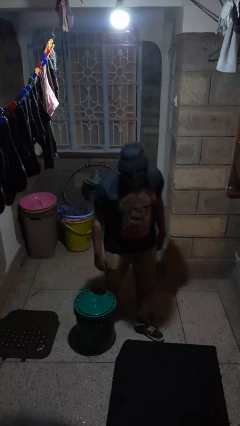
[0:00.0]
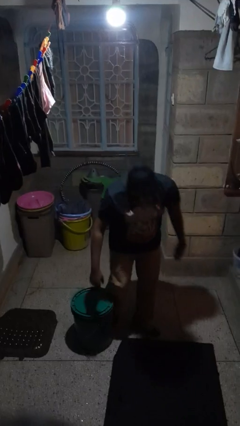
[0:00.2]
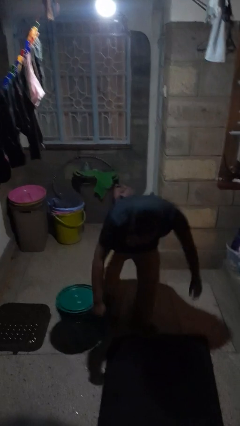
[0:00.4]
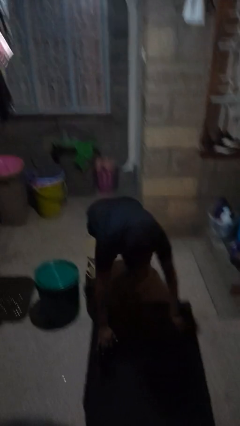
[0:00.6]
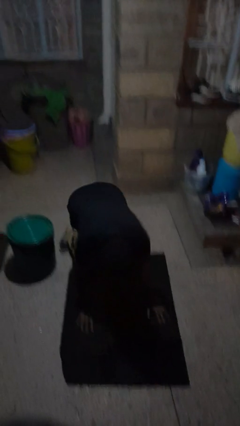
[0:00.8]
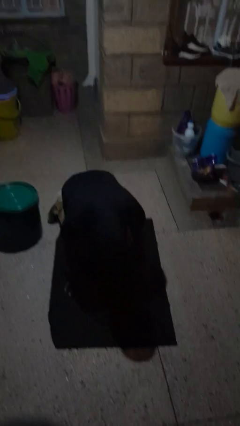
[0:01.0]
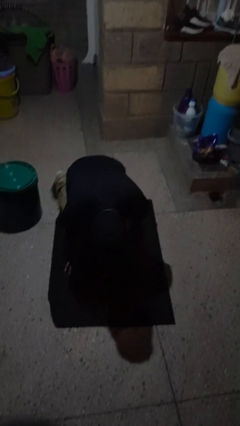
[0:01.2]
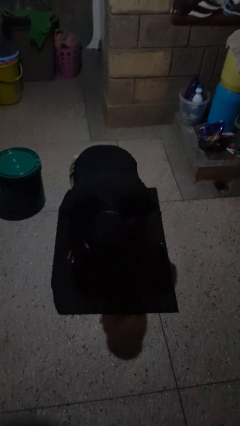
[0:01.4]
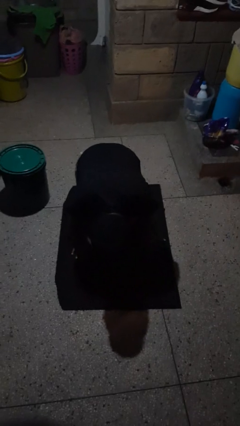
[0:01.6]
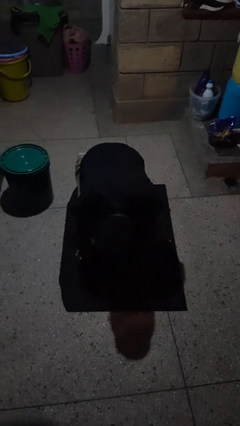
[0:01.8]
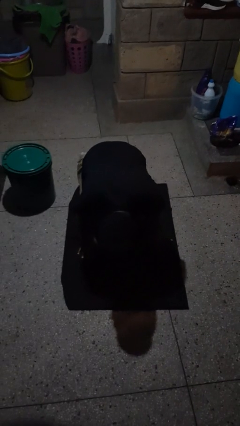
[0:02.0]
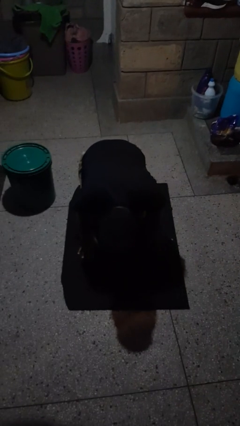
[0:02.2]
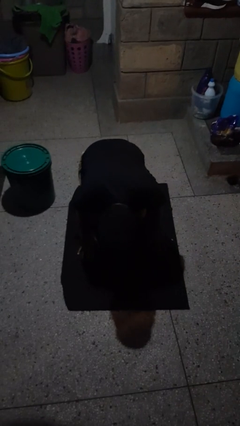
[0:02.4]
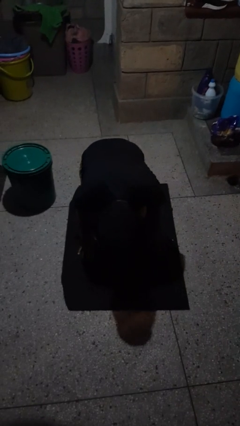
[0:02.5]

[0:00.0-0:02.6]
person trips on object on floor

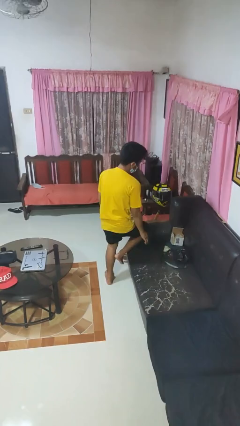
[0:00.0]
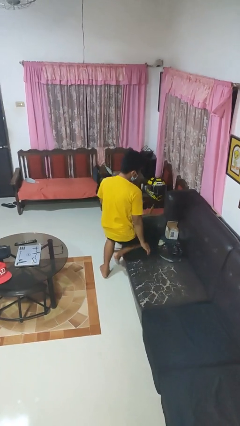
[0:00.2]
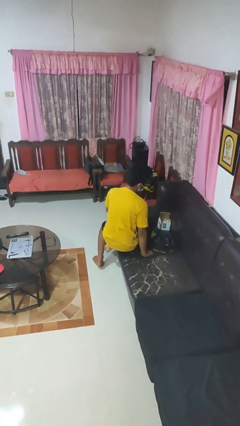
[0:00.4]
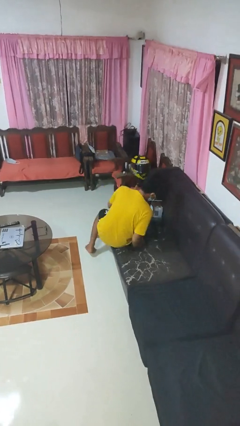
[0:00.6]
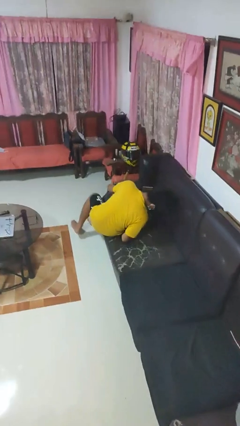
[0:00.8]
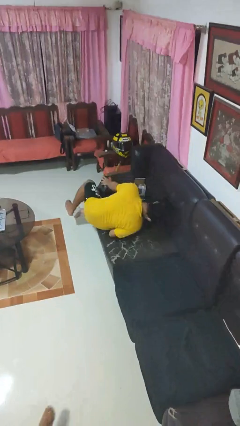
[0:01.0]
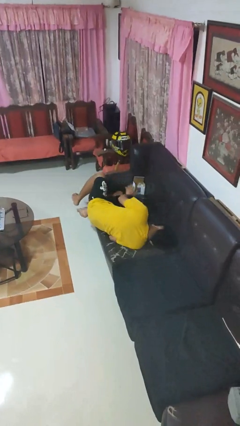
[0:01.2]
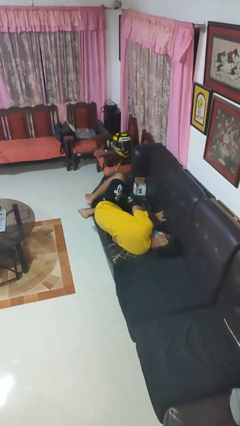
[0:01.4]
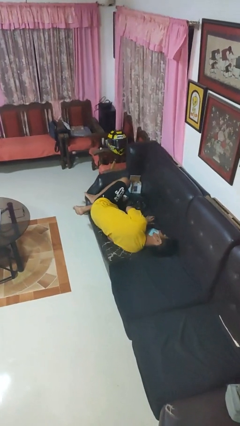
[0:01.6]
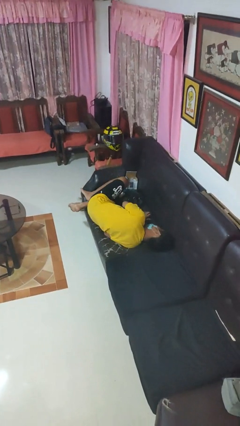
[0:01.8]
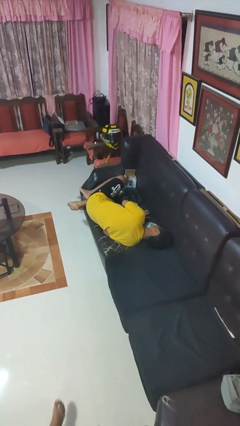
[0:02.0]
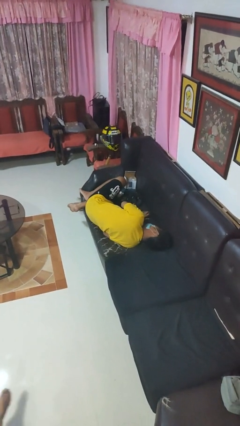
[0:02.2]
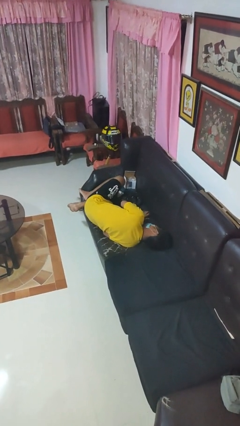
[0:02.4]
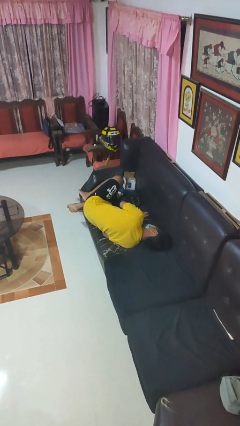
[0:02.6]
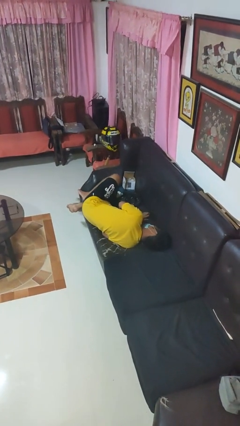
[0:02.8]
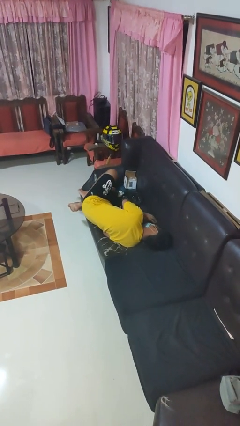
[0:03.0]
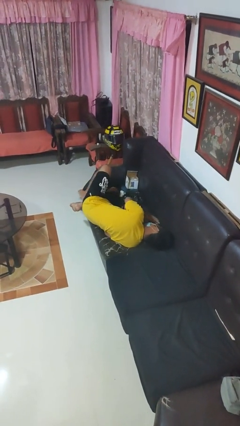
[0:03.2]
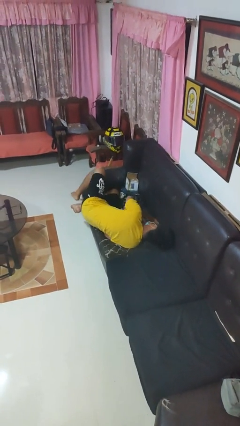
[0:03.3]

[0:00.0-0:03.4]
person lies down on couch

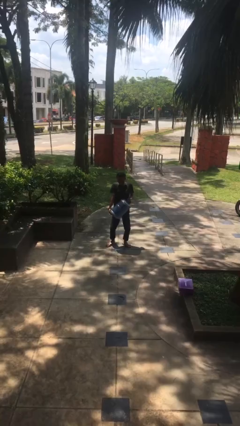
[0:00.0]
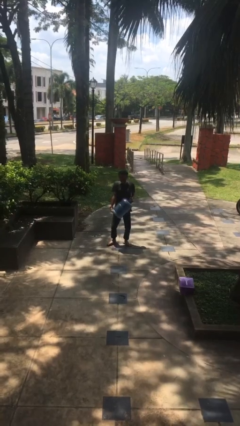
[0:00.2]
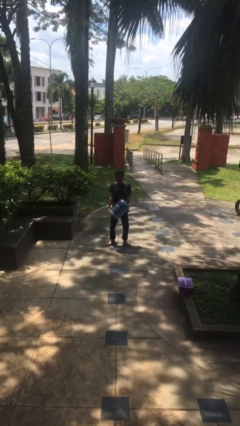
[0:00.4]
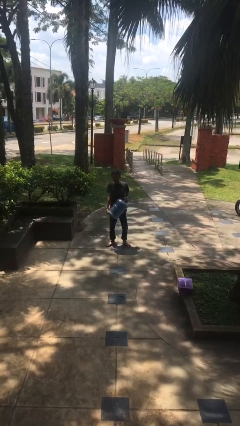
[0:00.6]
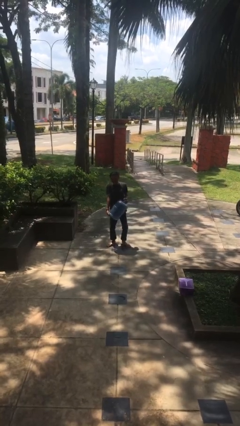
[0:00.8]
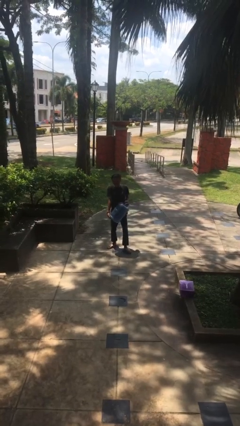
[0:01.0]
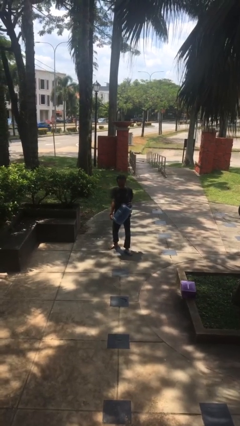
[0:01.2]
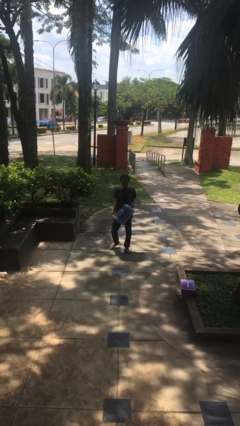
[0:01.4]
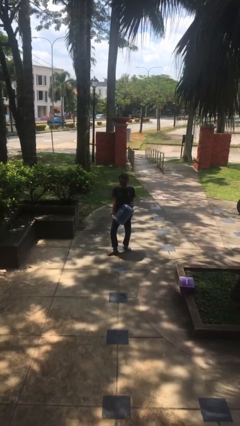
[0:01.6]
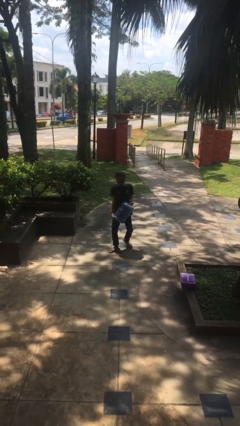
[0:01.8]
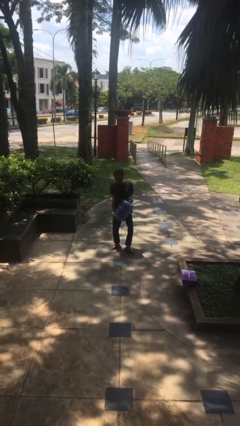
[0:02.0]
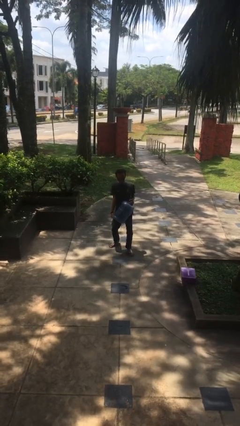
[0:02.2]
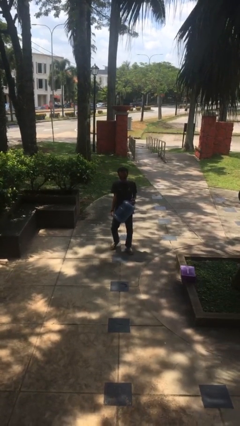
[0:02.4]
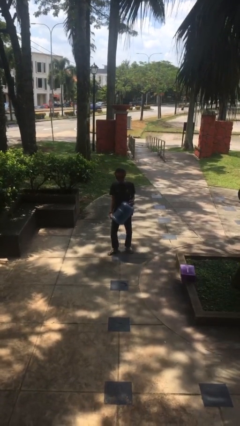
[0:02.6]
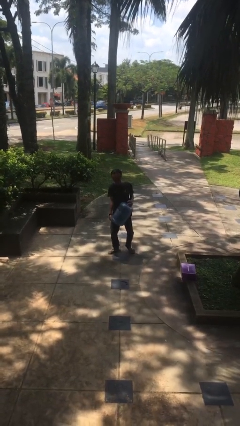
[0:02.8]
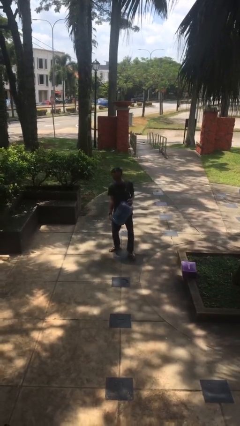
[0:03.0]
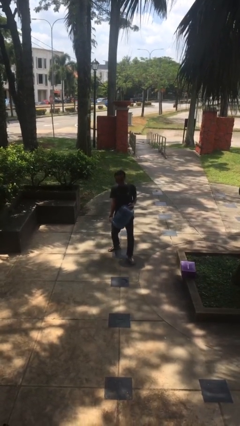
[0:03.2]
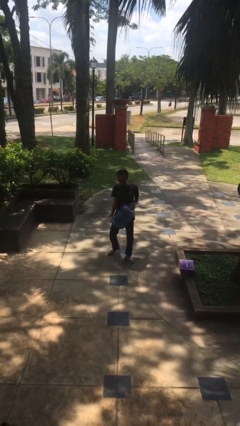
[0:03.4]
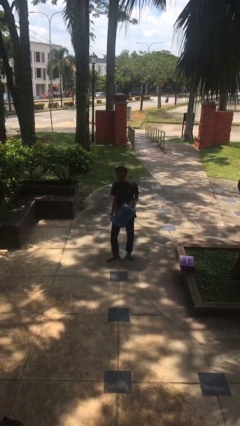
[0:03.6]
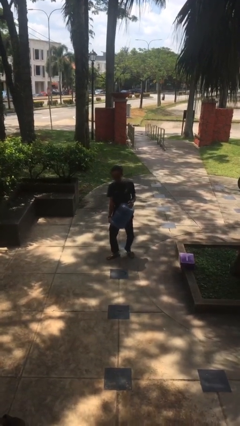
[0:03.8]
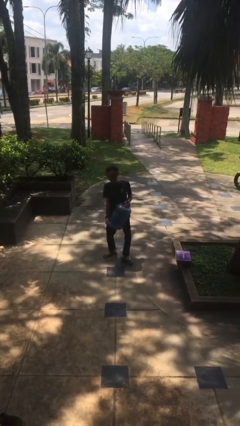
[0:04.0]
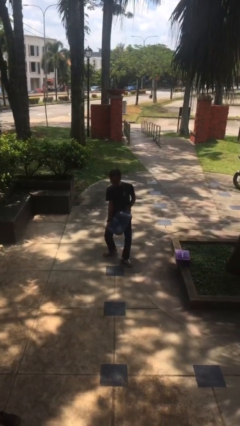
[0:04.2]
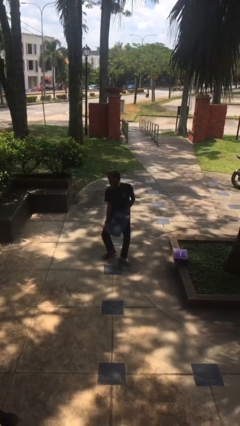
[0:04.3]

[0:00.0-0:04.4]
person carries heavy object

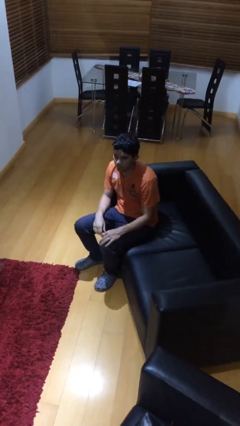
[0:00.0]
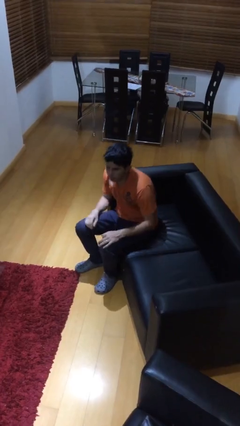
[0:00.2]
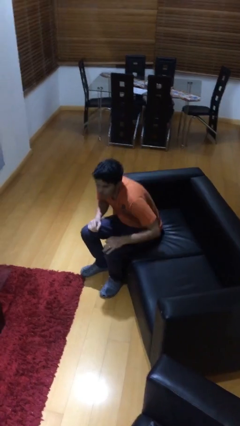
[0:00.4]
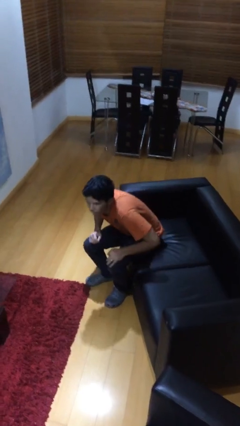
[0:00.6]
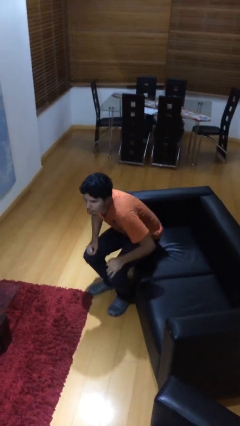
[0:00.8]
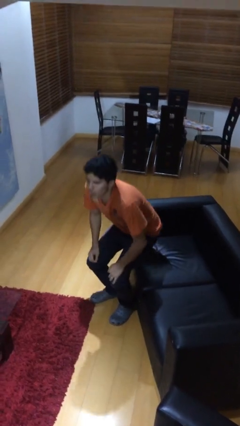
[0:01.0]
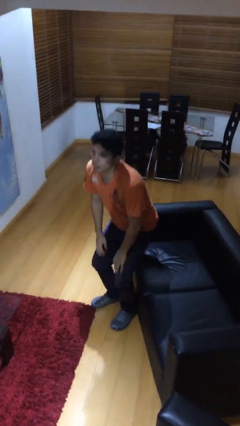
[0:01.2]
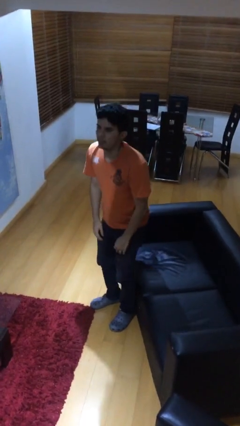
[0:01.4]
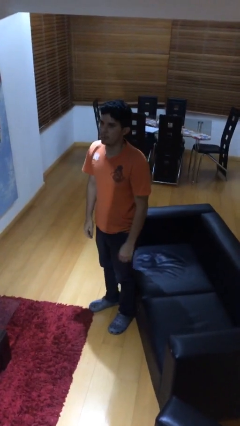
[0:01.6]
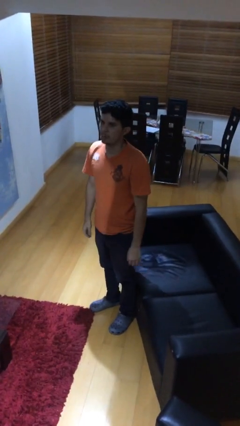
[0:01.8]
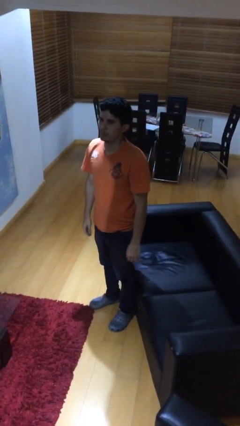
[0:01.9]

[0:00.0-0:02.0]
person stands up

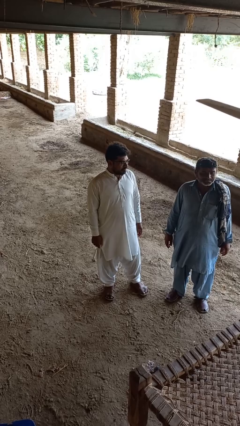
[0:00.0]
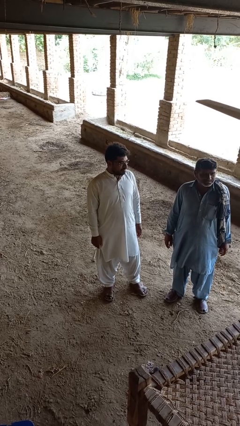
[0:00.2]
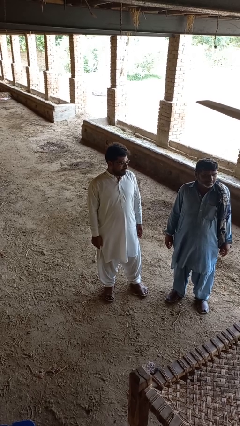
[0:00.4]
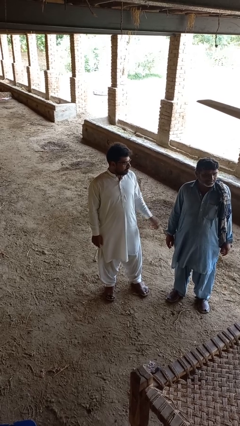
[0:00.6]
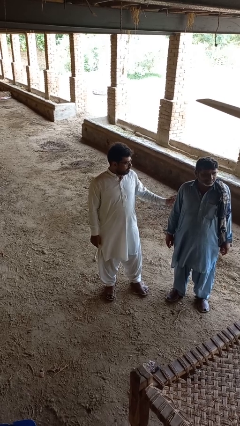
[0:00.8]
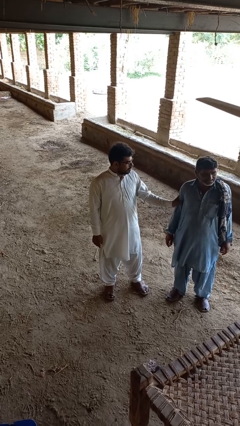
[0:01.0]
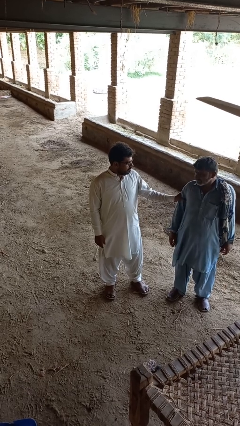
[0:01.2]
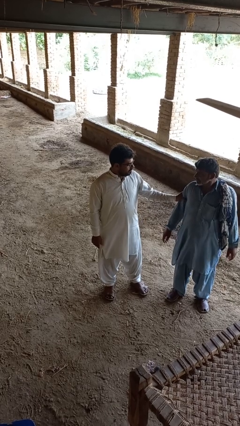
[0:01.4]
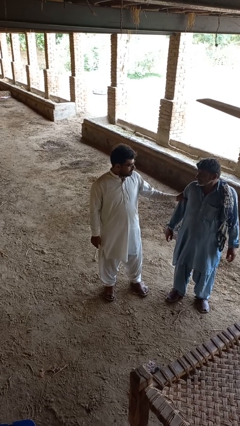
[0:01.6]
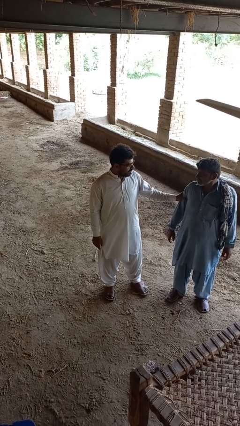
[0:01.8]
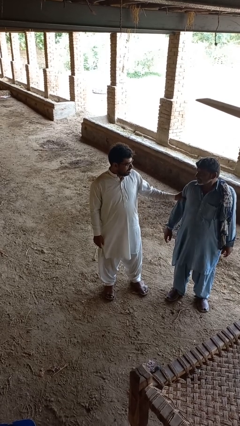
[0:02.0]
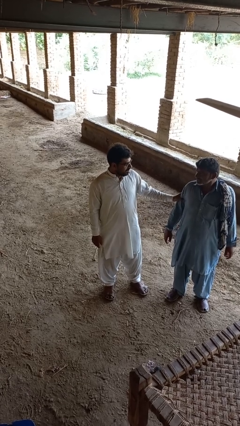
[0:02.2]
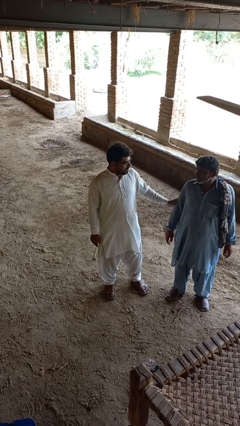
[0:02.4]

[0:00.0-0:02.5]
person grabs person by bicep

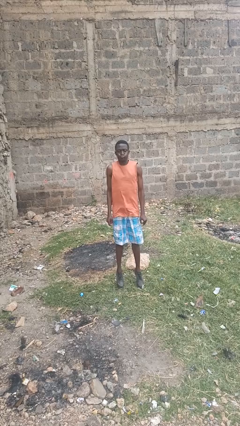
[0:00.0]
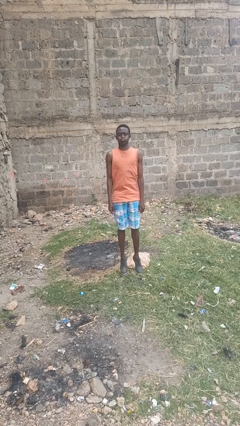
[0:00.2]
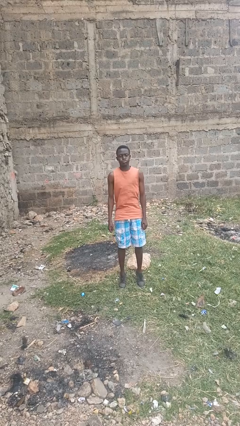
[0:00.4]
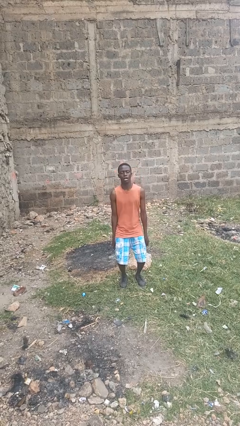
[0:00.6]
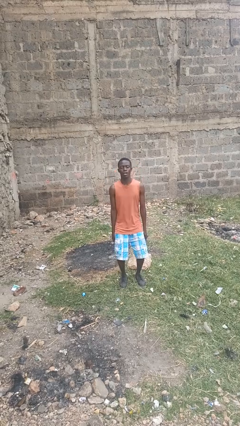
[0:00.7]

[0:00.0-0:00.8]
person jumps

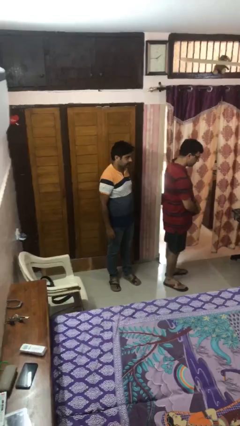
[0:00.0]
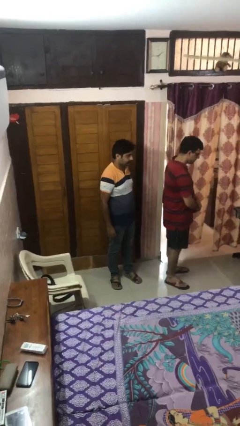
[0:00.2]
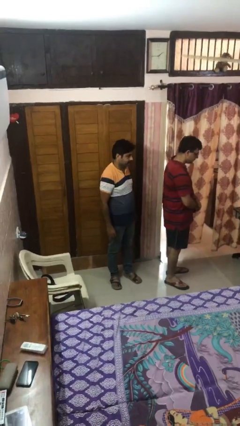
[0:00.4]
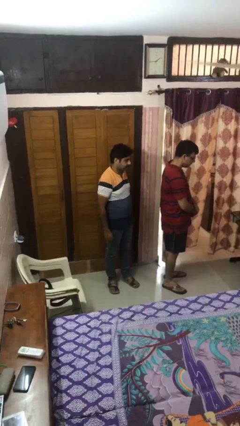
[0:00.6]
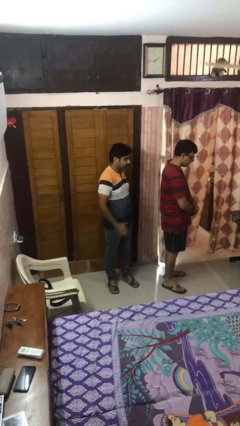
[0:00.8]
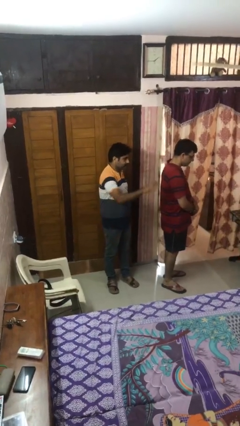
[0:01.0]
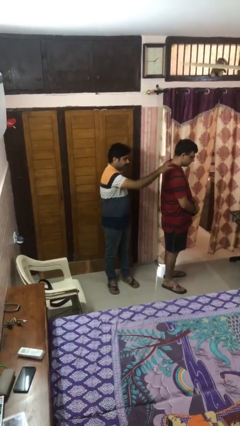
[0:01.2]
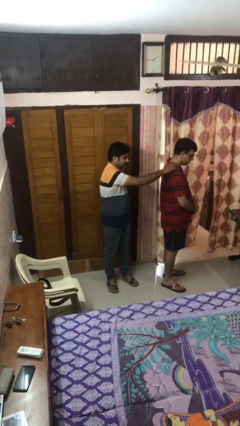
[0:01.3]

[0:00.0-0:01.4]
person grabs person by shoulder
